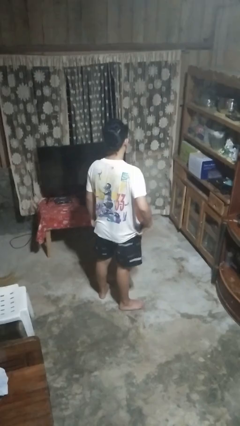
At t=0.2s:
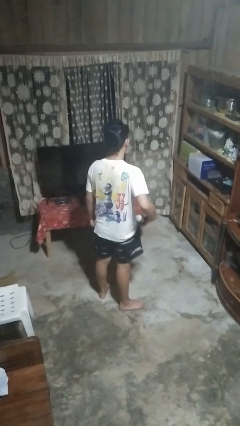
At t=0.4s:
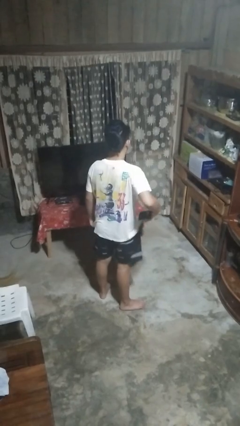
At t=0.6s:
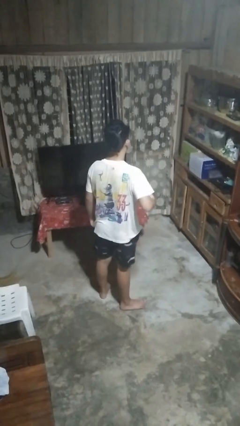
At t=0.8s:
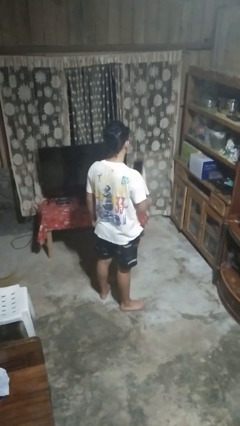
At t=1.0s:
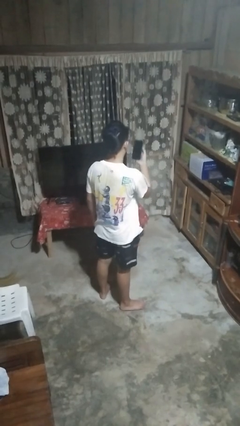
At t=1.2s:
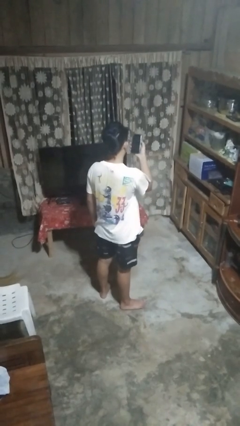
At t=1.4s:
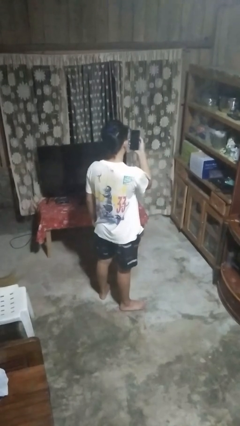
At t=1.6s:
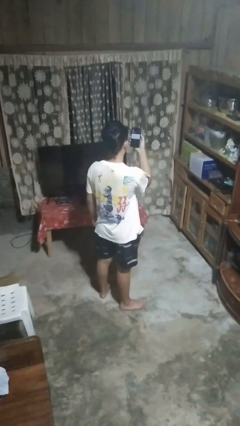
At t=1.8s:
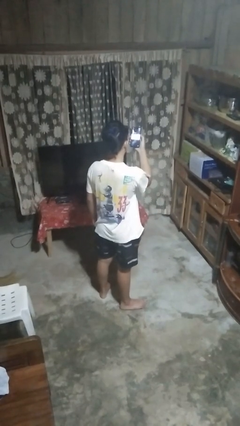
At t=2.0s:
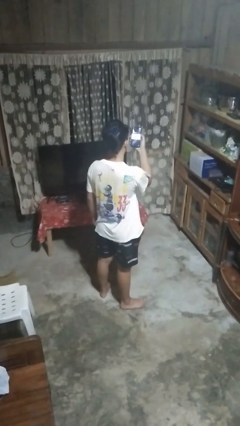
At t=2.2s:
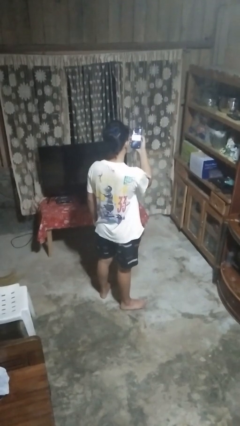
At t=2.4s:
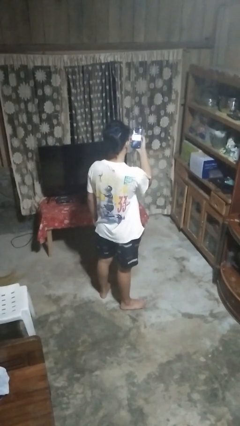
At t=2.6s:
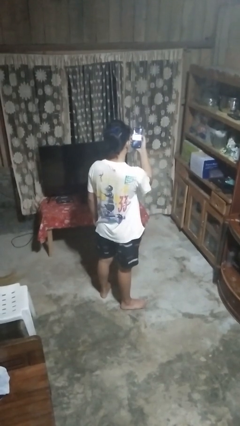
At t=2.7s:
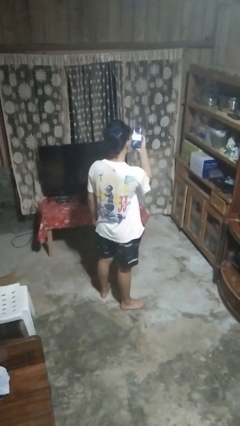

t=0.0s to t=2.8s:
person takes phone from pocket

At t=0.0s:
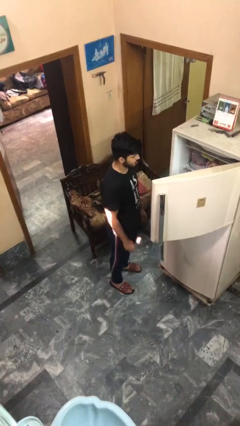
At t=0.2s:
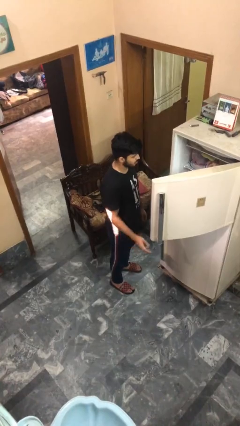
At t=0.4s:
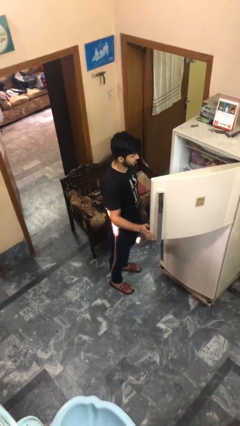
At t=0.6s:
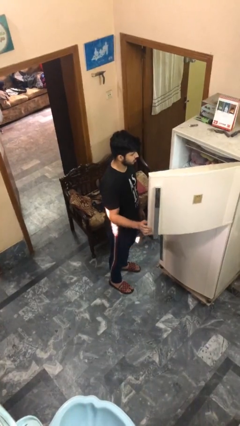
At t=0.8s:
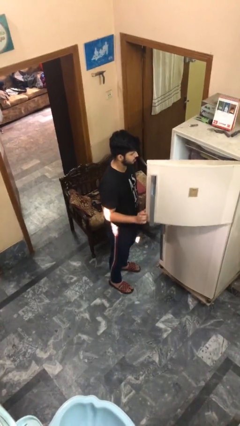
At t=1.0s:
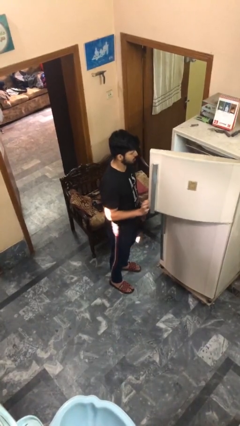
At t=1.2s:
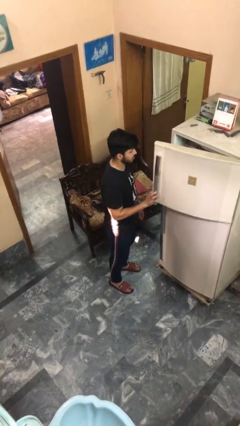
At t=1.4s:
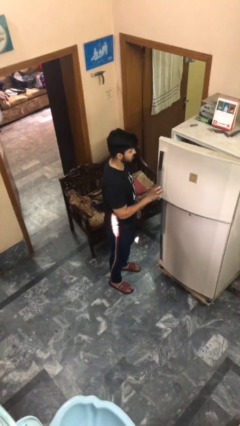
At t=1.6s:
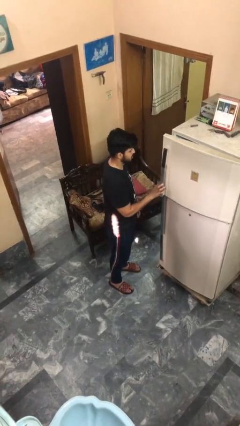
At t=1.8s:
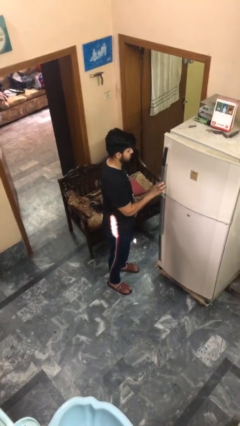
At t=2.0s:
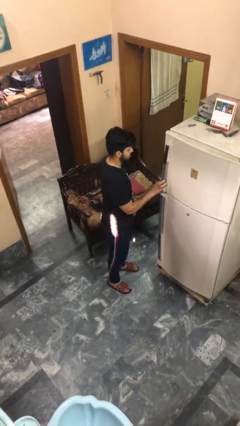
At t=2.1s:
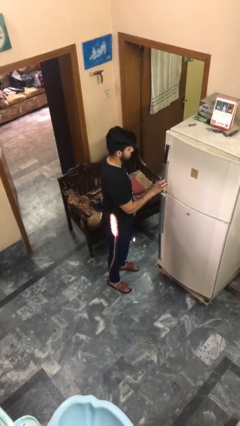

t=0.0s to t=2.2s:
person closes refrigerator

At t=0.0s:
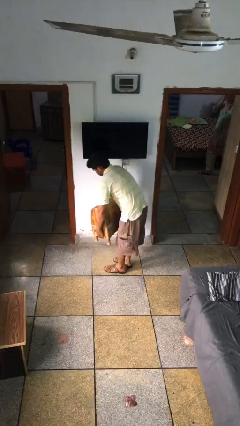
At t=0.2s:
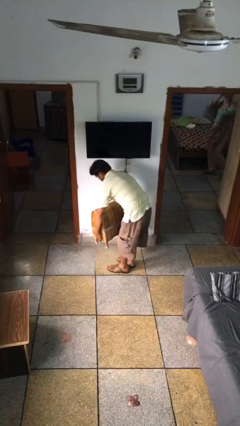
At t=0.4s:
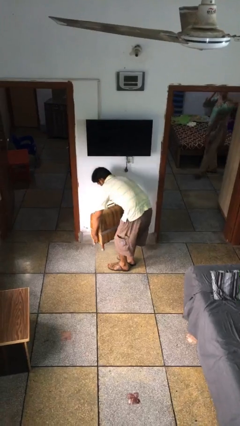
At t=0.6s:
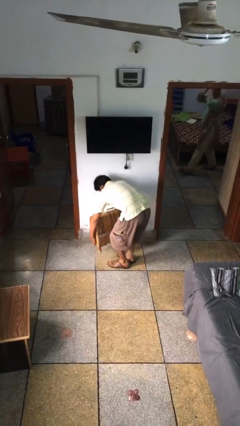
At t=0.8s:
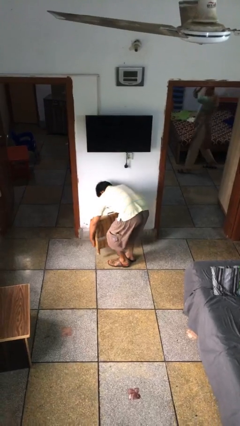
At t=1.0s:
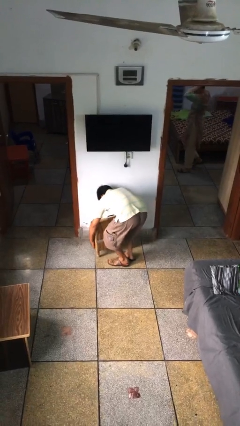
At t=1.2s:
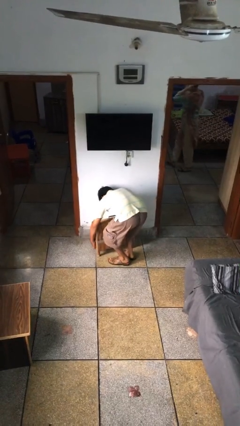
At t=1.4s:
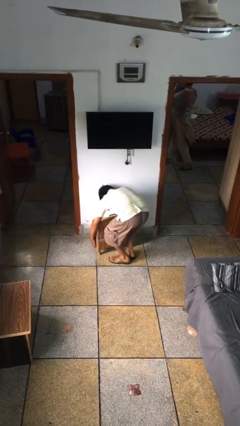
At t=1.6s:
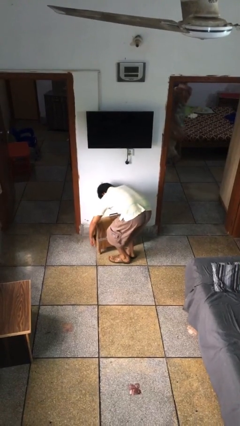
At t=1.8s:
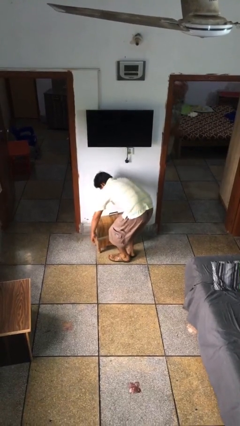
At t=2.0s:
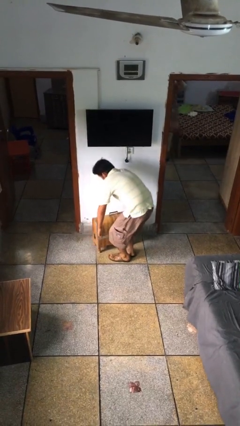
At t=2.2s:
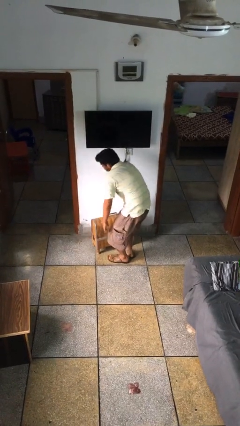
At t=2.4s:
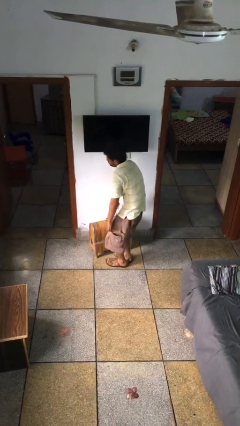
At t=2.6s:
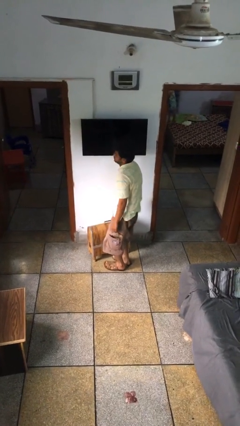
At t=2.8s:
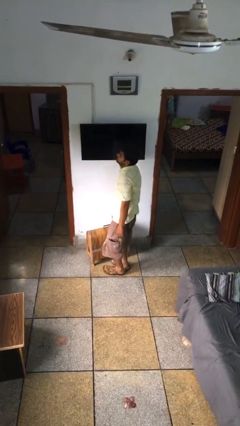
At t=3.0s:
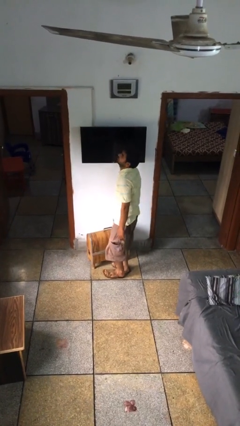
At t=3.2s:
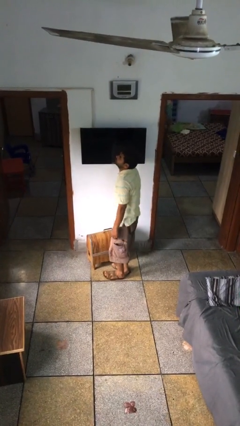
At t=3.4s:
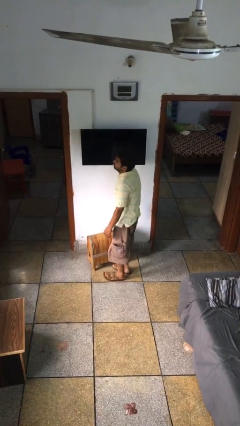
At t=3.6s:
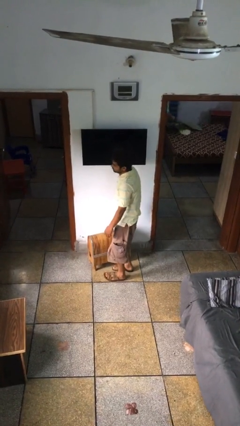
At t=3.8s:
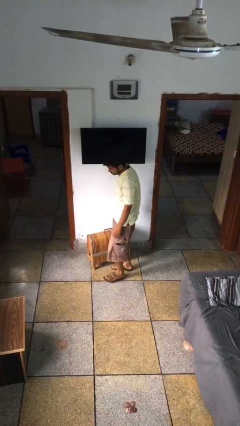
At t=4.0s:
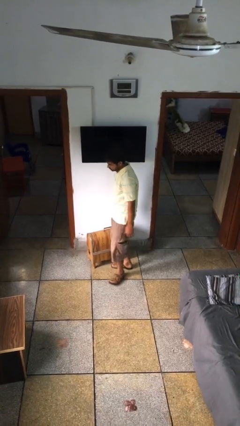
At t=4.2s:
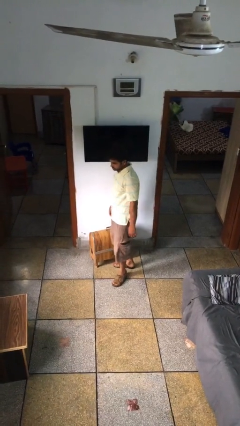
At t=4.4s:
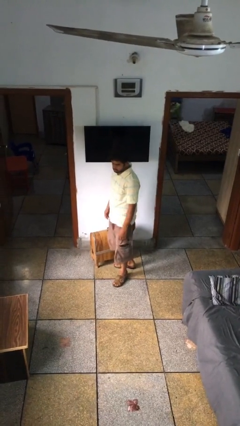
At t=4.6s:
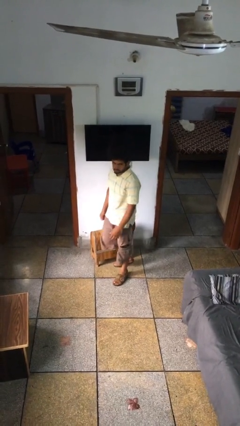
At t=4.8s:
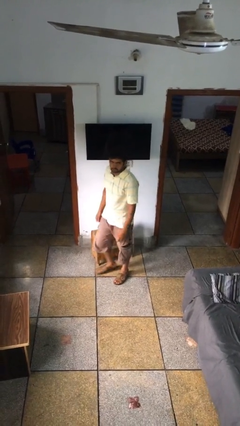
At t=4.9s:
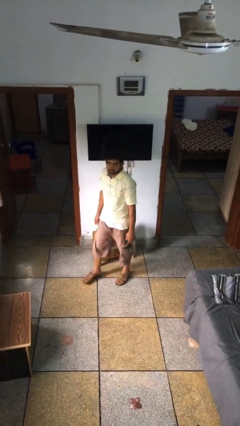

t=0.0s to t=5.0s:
person puts down object on floor

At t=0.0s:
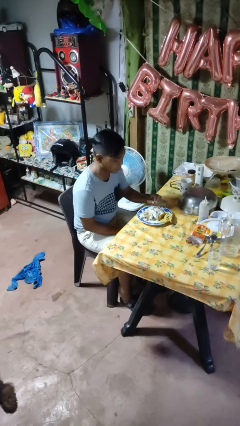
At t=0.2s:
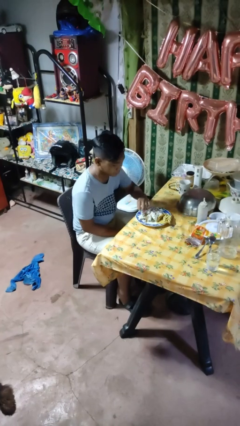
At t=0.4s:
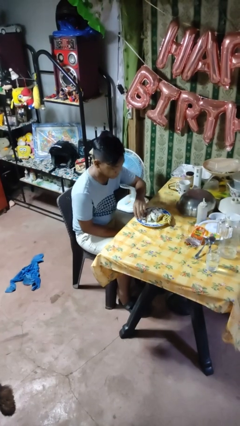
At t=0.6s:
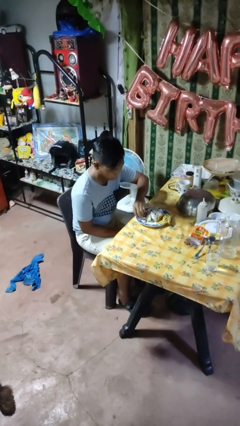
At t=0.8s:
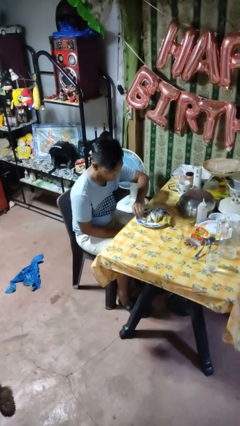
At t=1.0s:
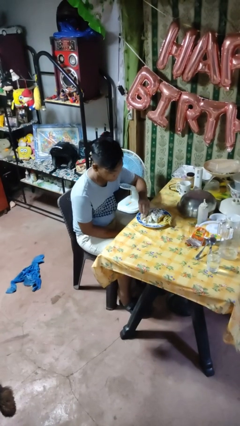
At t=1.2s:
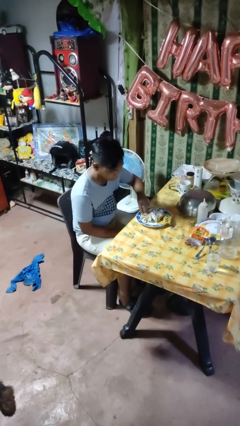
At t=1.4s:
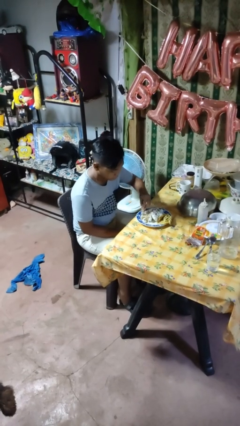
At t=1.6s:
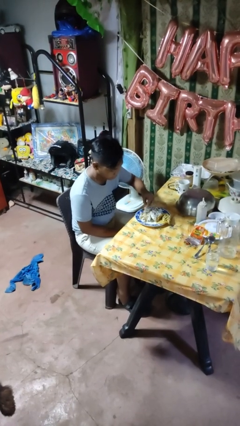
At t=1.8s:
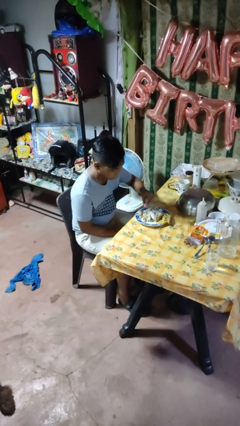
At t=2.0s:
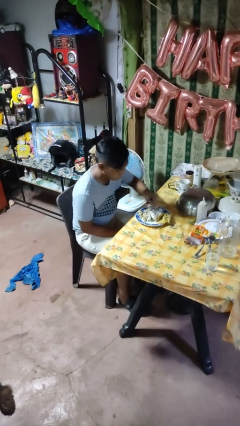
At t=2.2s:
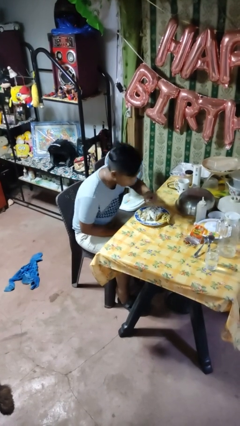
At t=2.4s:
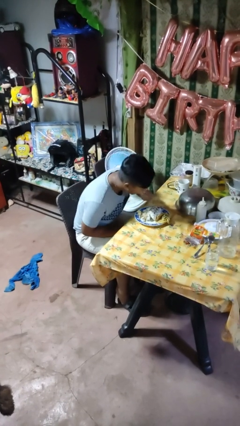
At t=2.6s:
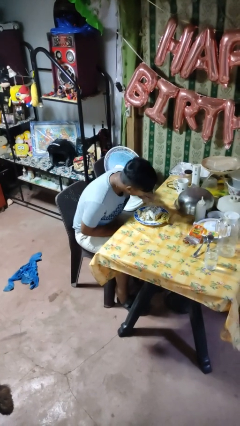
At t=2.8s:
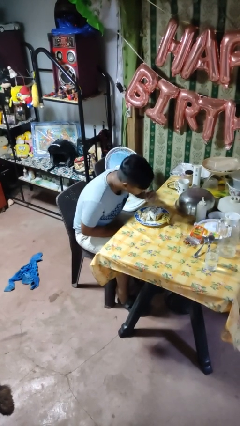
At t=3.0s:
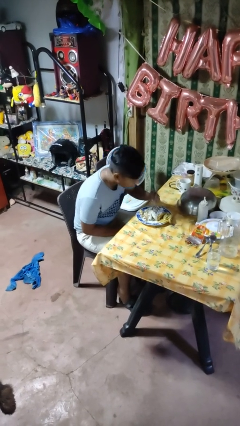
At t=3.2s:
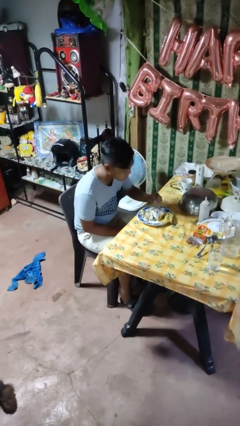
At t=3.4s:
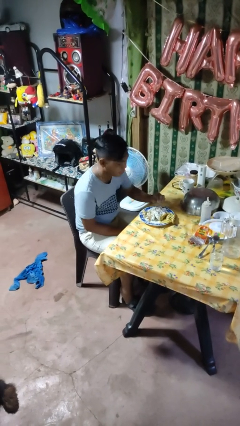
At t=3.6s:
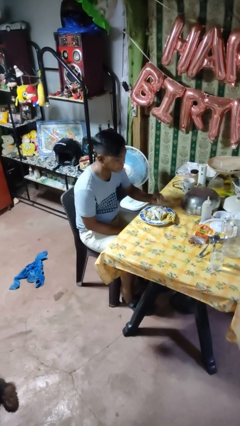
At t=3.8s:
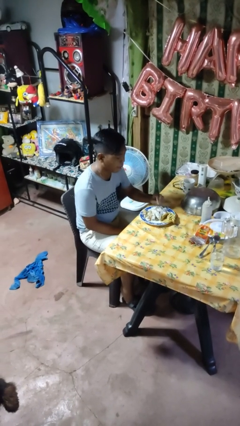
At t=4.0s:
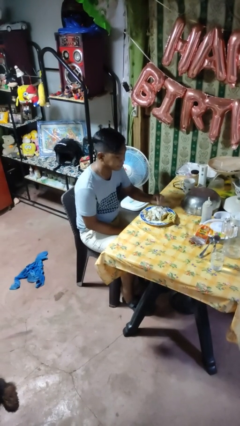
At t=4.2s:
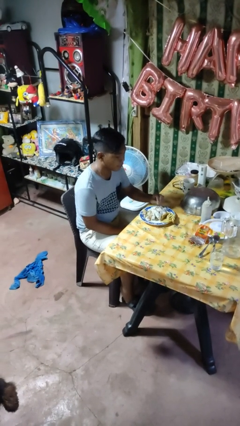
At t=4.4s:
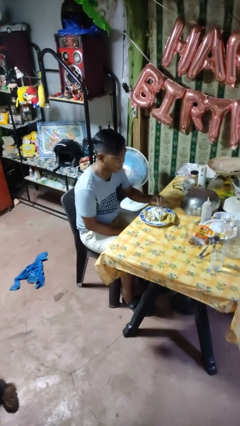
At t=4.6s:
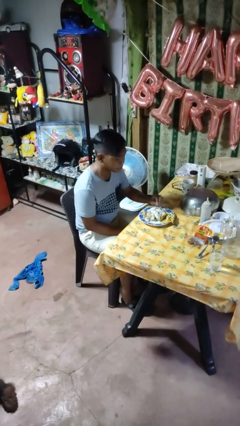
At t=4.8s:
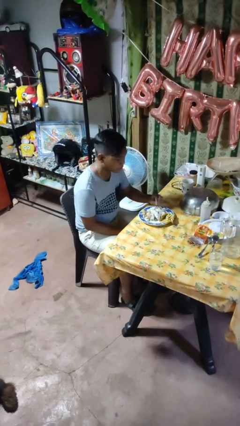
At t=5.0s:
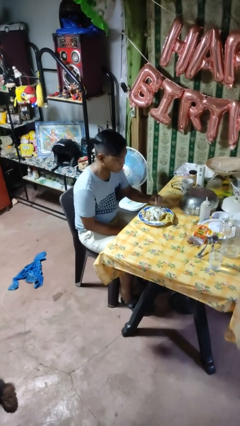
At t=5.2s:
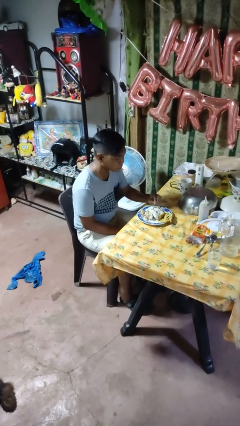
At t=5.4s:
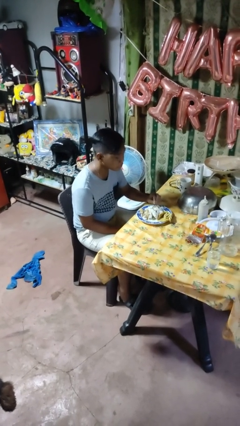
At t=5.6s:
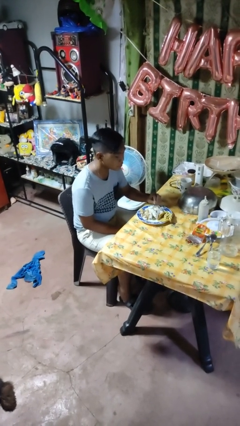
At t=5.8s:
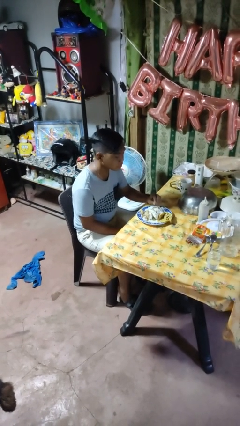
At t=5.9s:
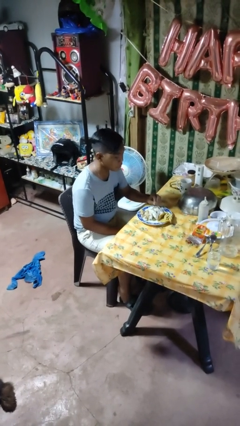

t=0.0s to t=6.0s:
person eats with hands

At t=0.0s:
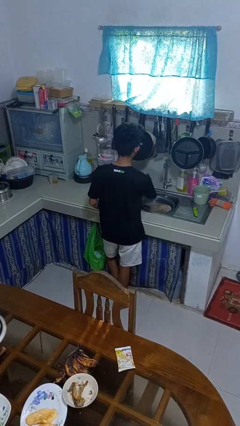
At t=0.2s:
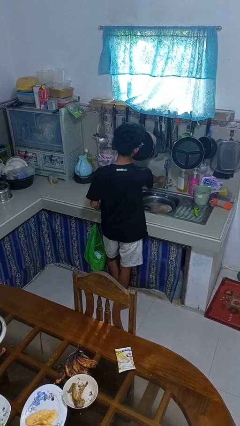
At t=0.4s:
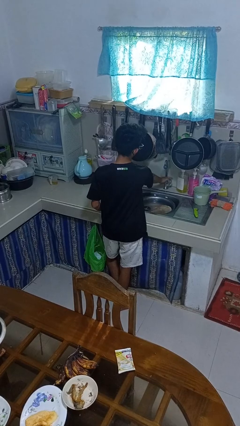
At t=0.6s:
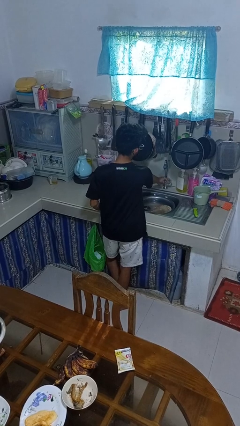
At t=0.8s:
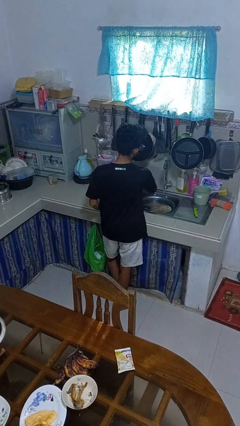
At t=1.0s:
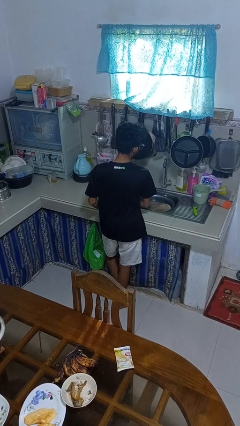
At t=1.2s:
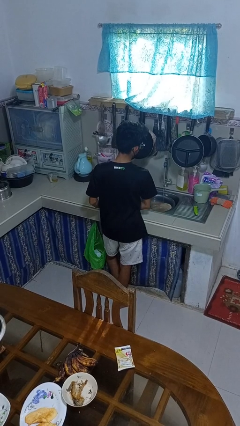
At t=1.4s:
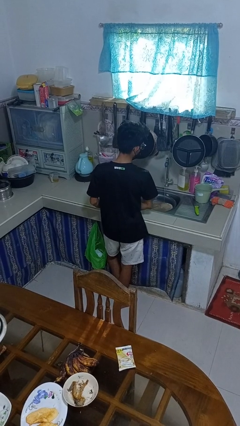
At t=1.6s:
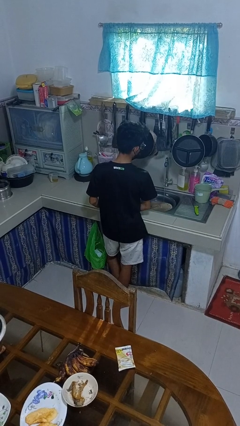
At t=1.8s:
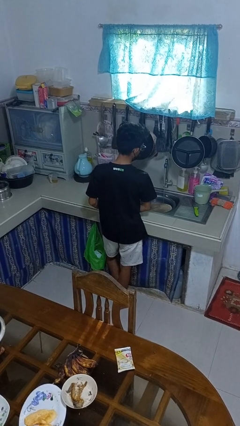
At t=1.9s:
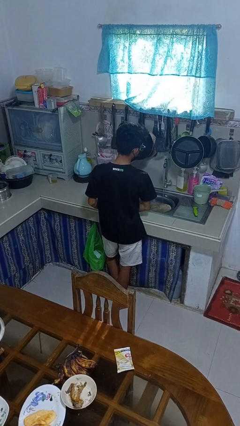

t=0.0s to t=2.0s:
person turns on faucet
